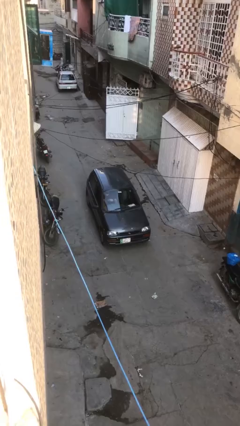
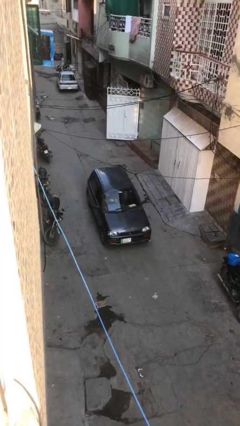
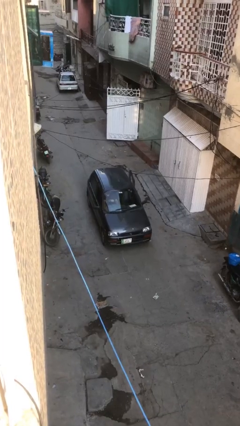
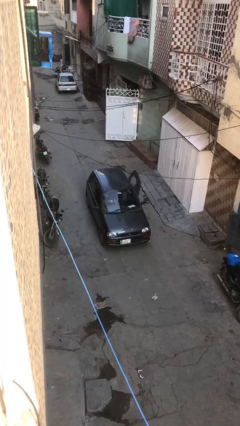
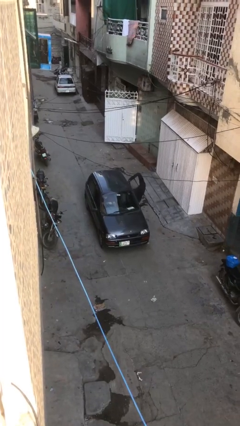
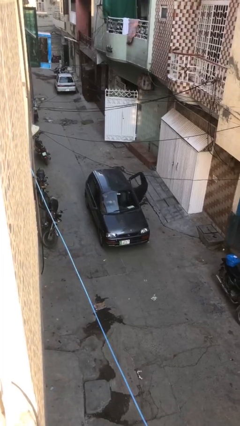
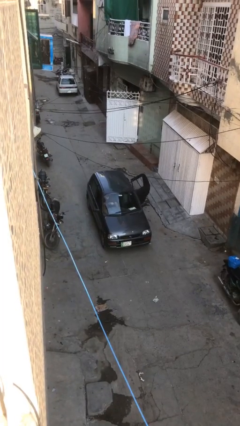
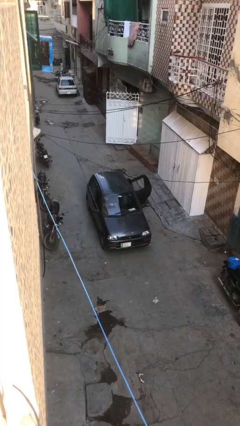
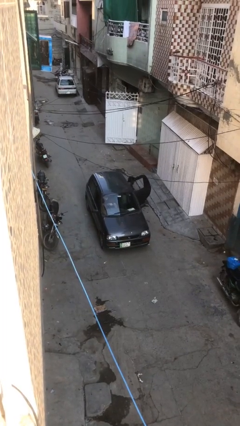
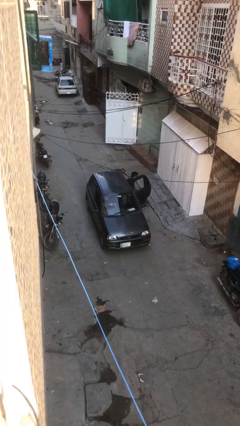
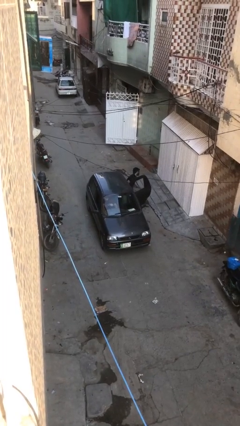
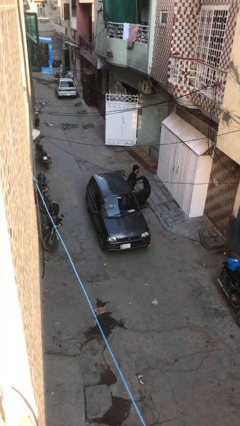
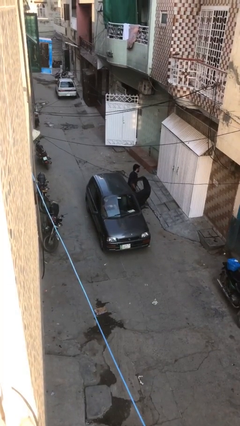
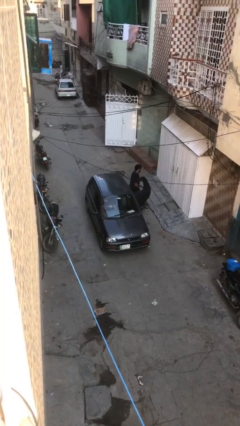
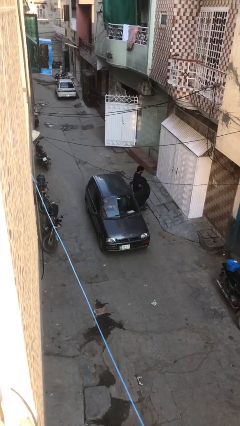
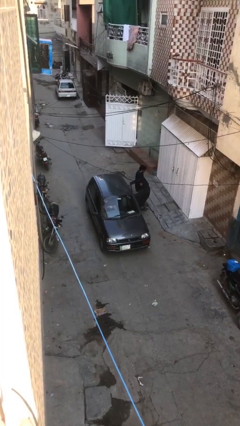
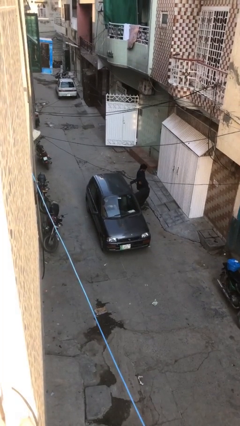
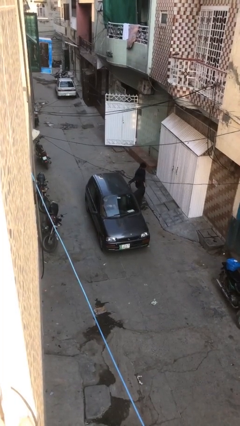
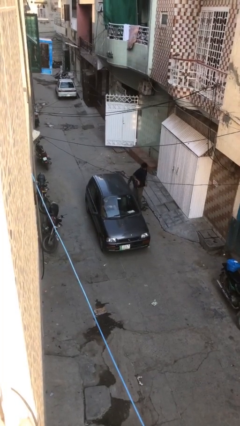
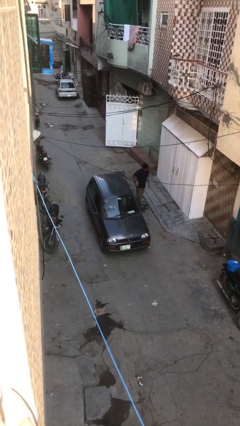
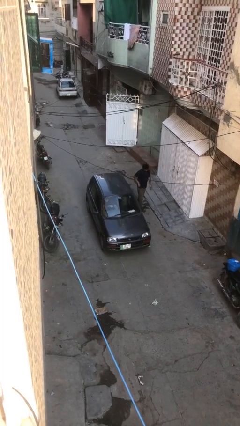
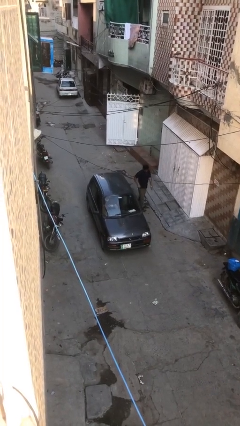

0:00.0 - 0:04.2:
car drops off person

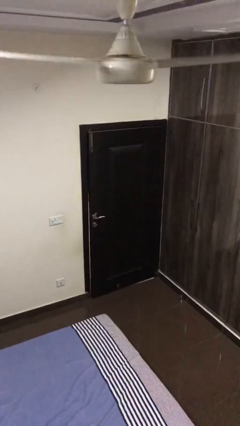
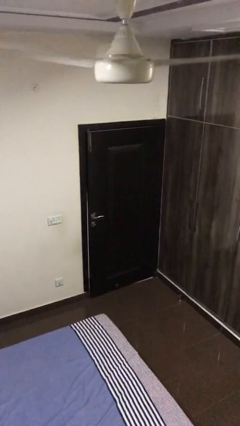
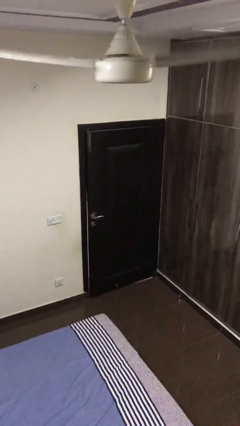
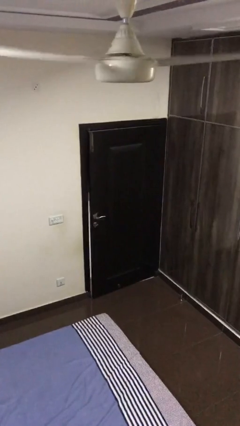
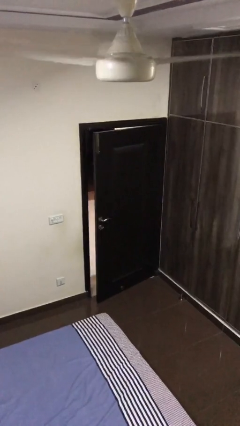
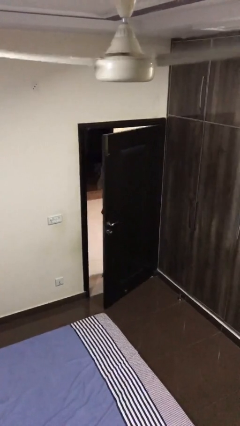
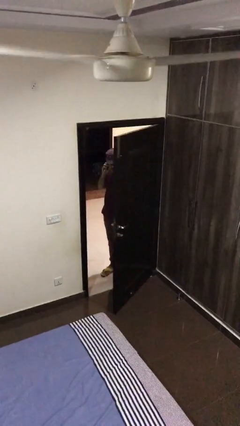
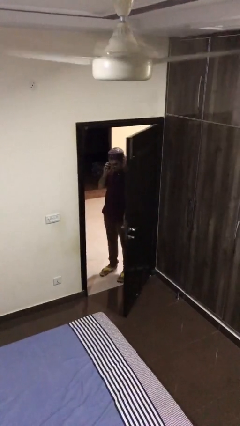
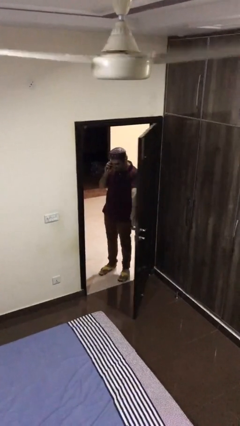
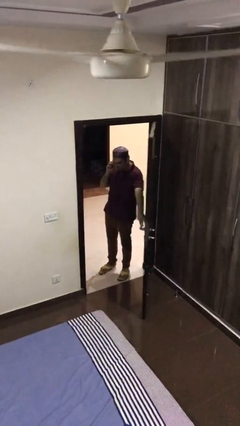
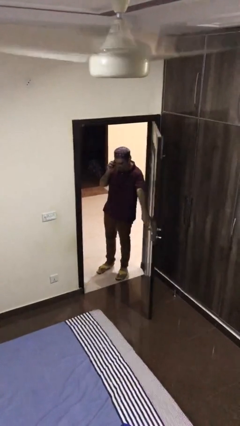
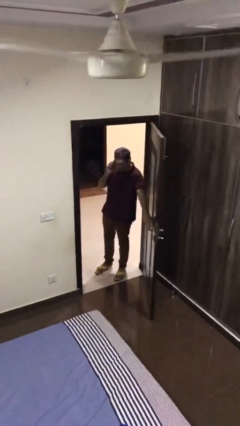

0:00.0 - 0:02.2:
person opens facility door

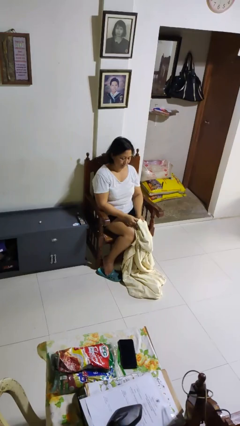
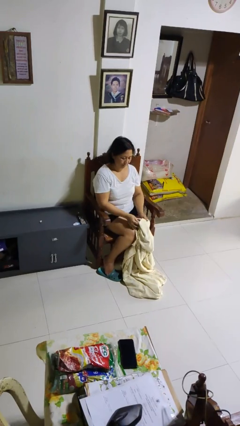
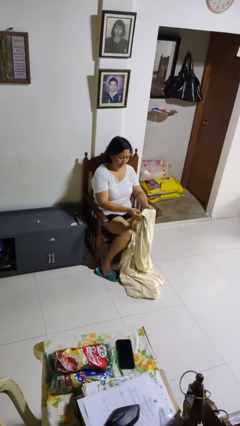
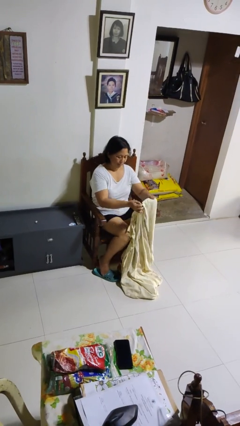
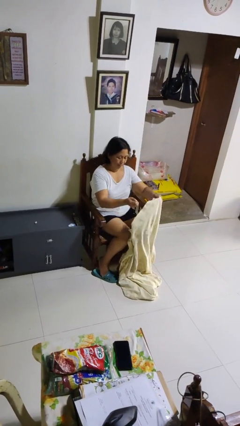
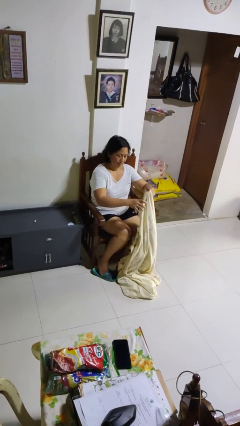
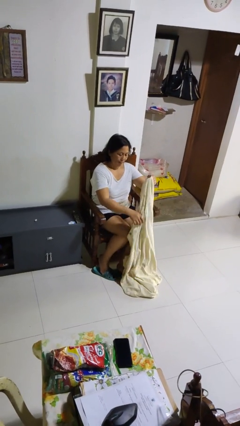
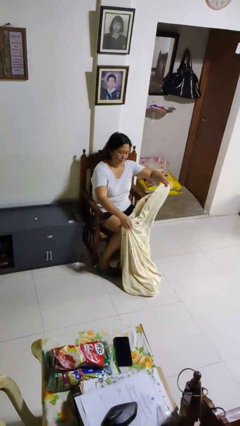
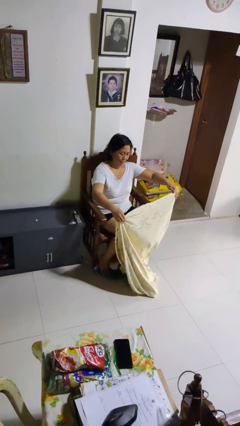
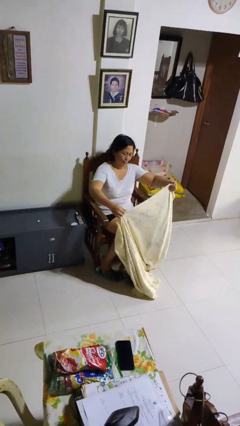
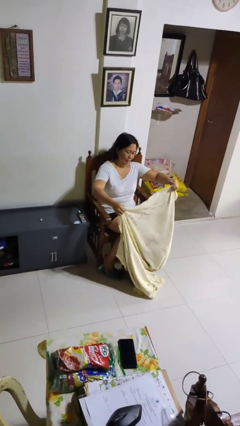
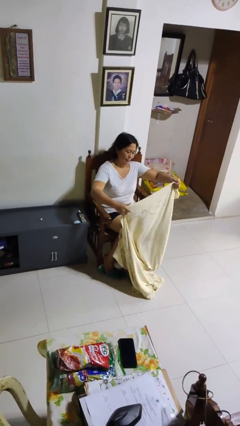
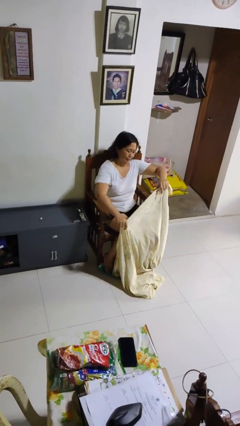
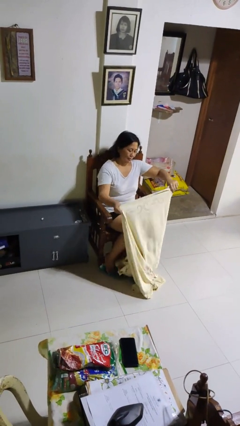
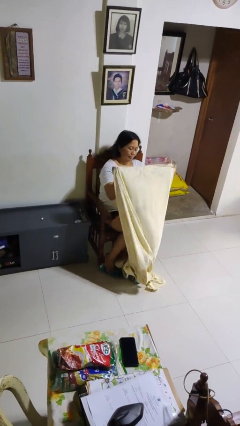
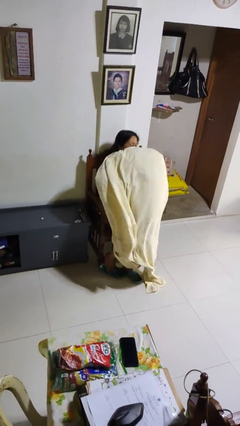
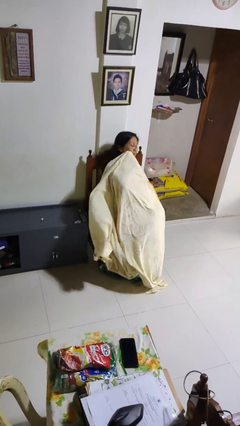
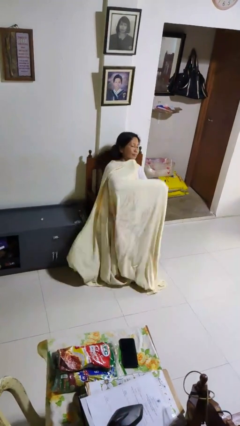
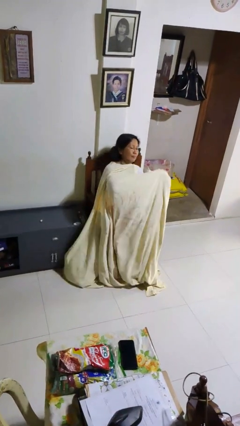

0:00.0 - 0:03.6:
person covers with blanket

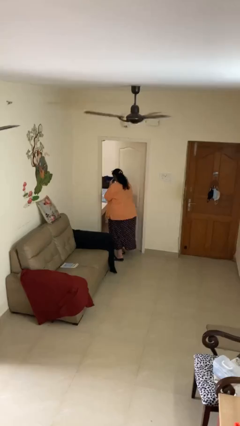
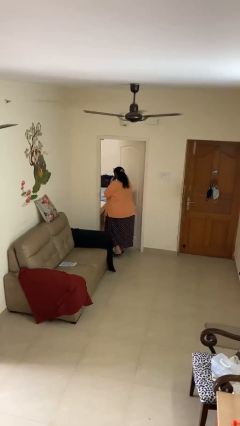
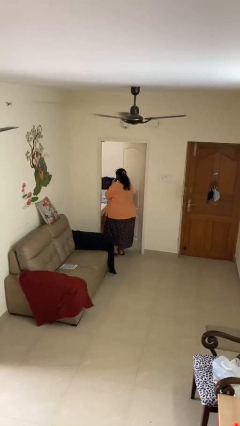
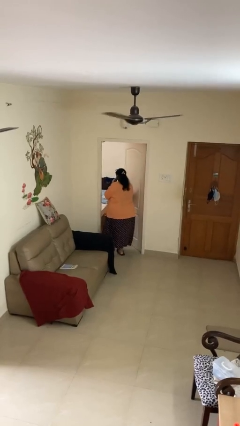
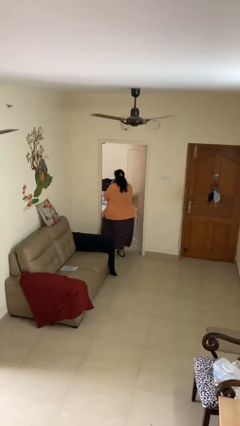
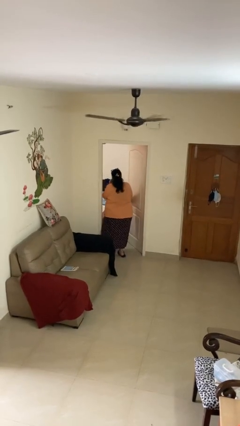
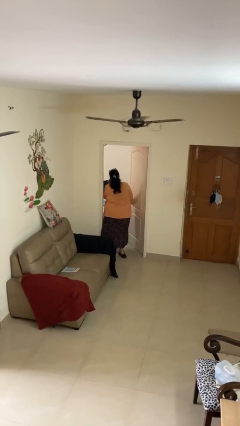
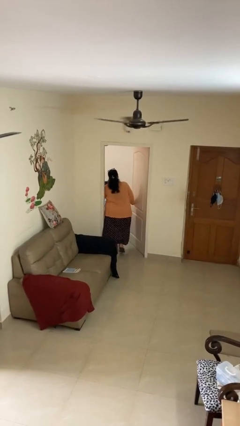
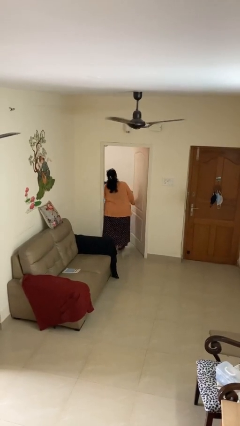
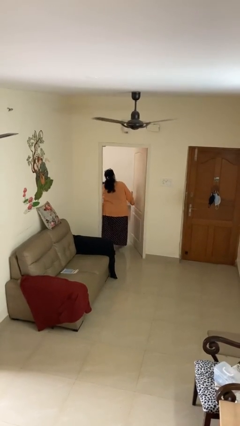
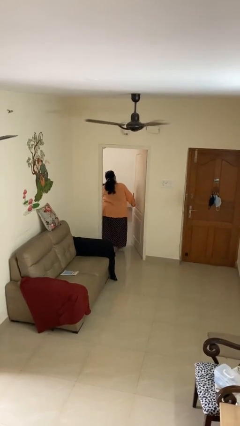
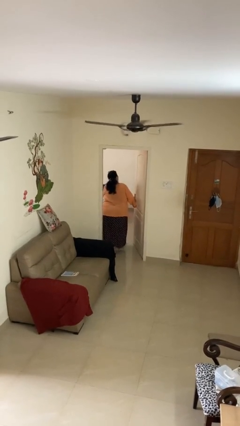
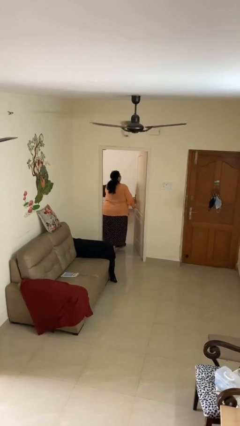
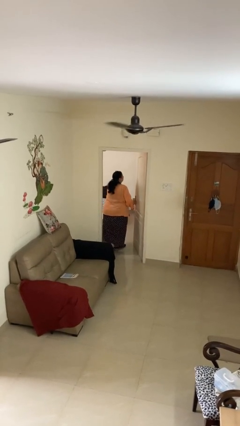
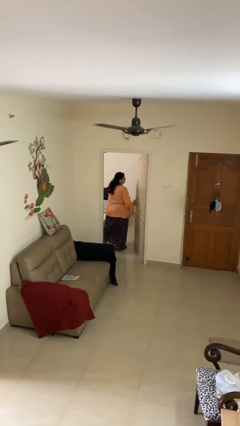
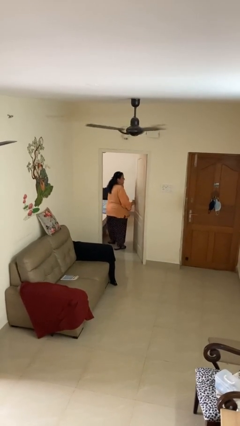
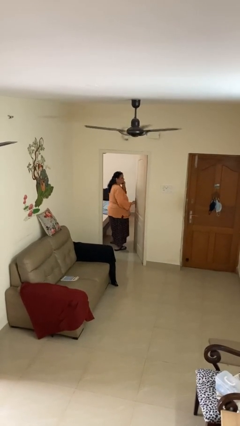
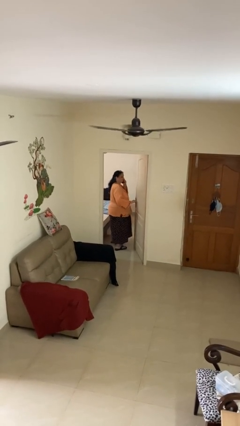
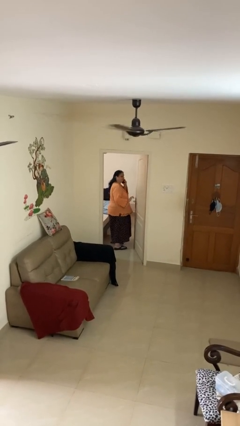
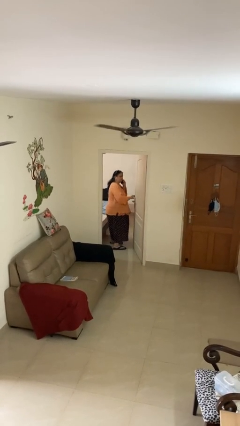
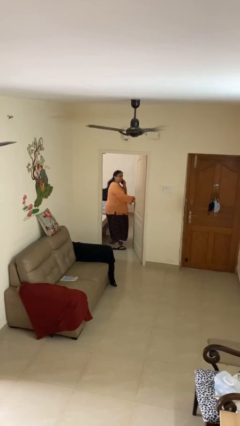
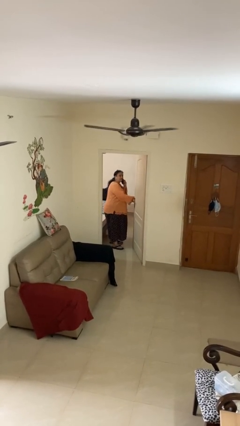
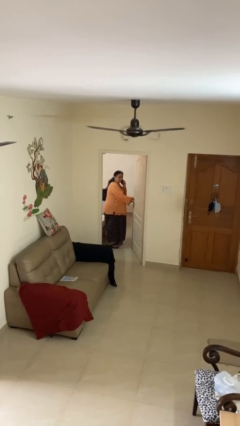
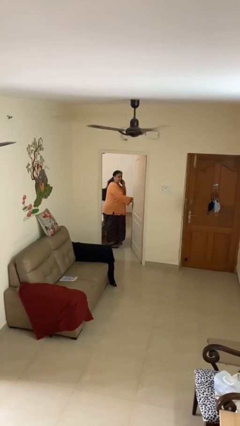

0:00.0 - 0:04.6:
person exits scene through structure

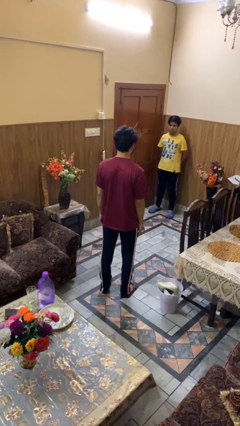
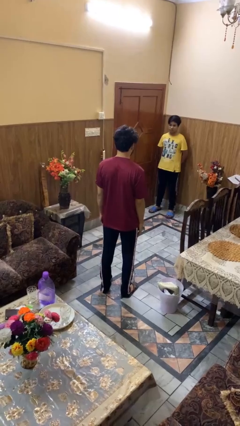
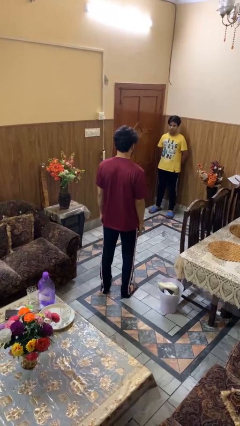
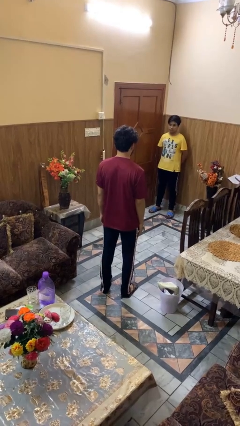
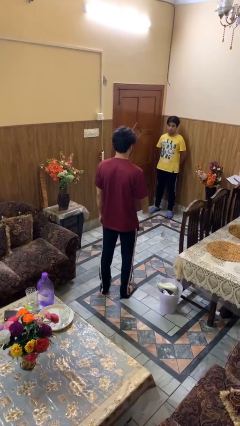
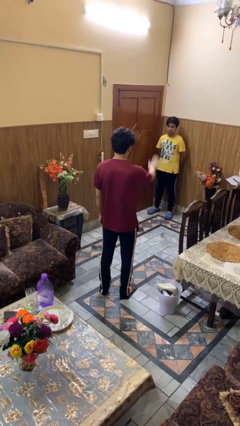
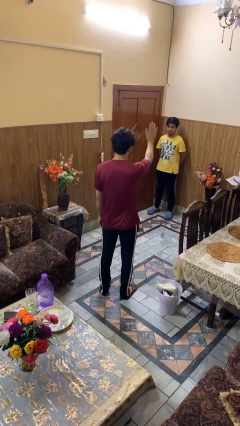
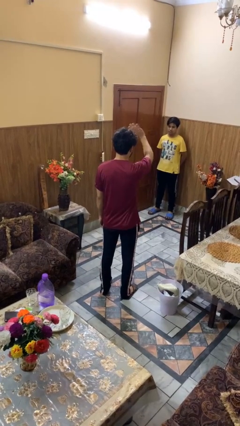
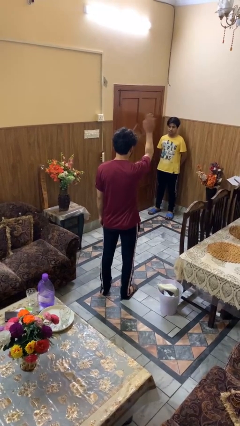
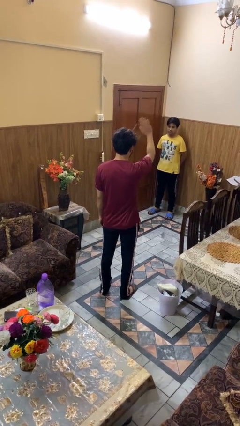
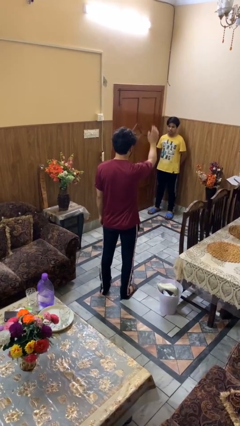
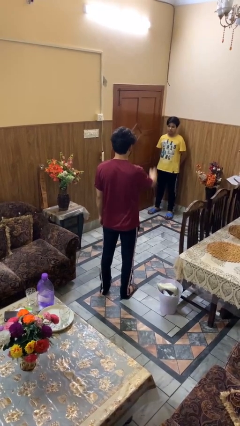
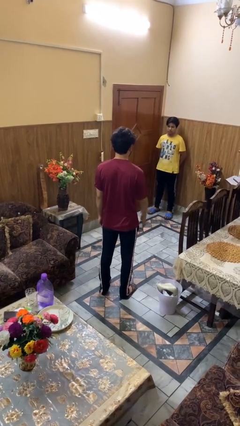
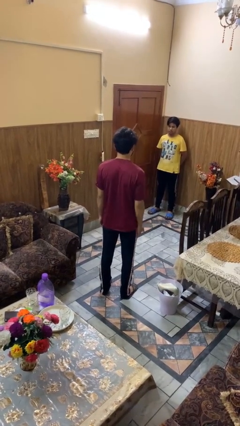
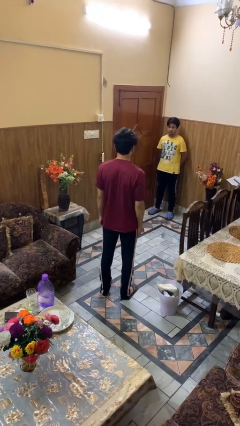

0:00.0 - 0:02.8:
person waves at person

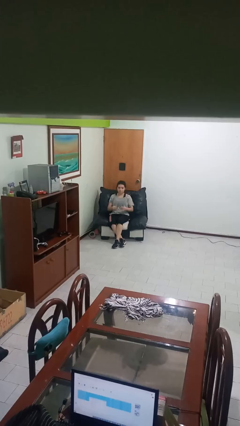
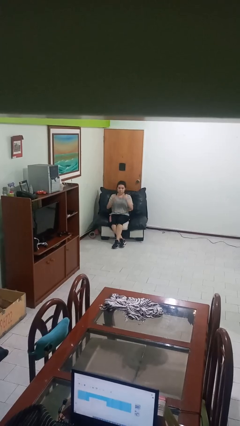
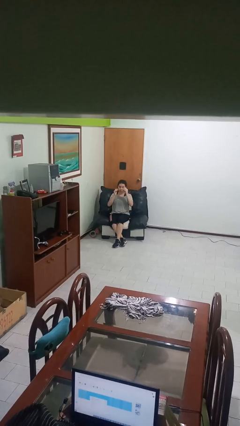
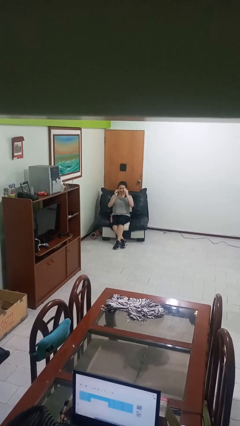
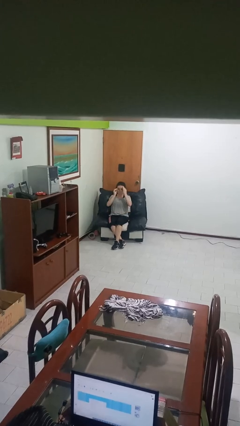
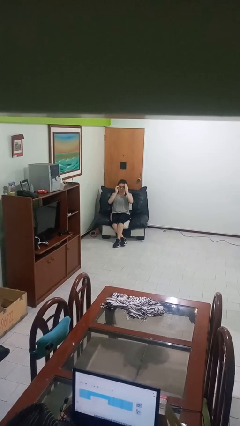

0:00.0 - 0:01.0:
person puts on glasses
